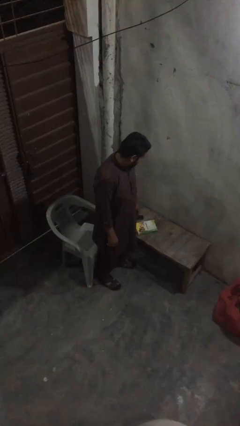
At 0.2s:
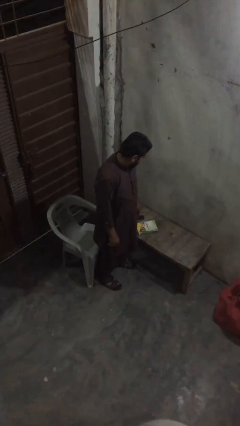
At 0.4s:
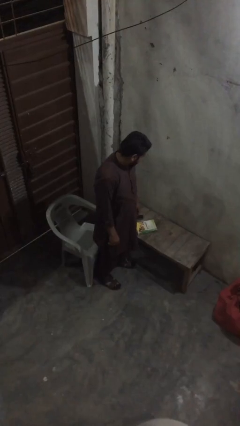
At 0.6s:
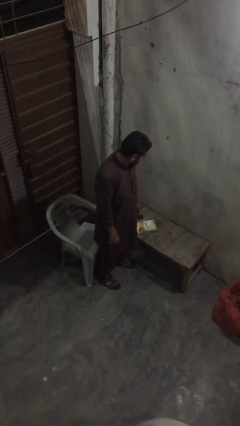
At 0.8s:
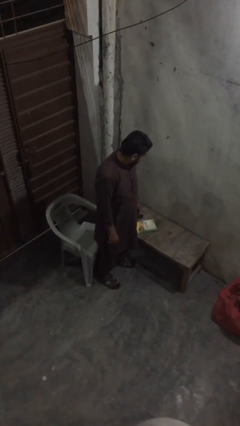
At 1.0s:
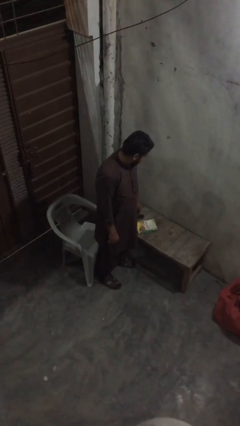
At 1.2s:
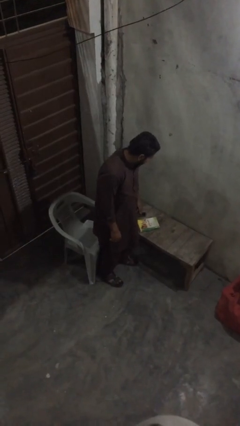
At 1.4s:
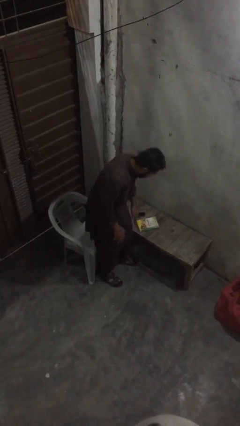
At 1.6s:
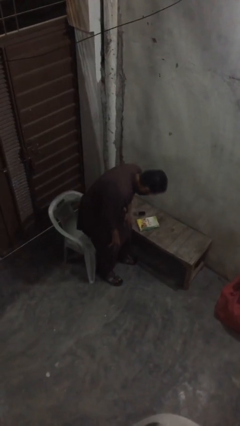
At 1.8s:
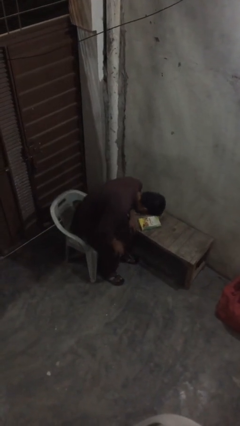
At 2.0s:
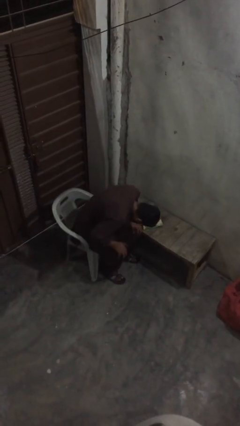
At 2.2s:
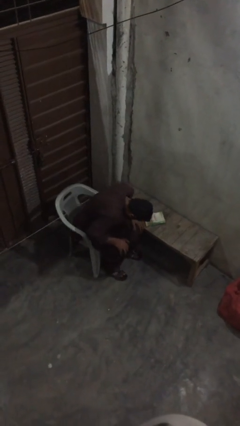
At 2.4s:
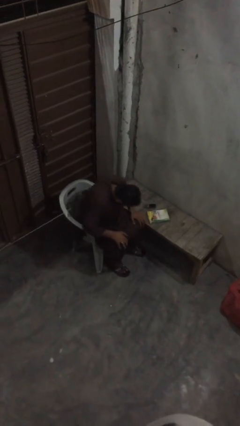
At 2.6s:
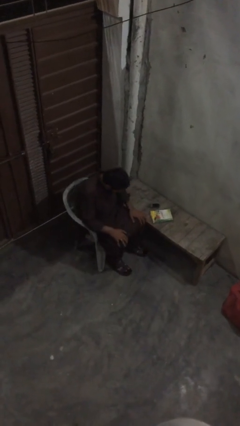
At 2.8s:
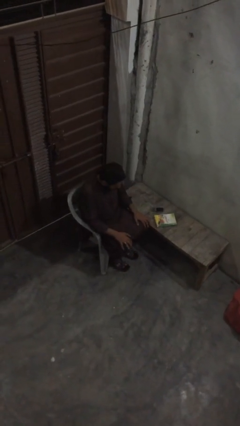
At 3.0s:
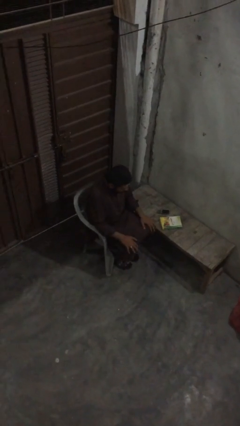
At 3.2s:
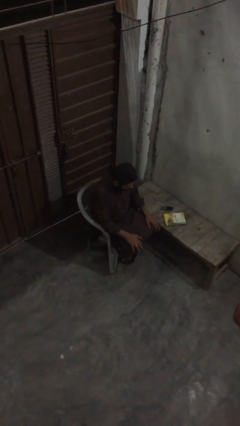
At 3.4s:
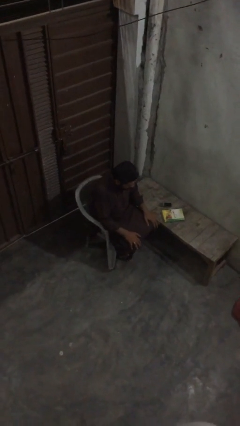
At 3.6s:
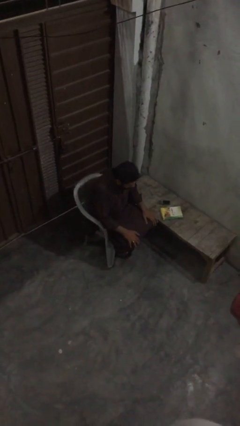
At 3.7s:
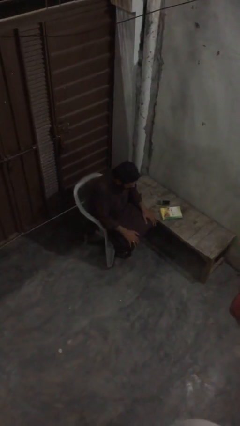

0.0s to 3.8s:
person sits down

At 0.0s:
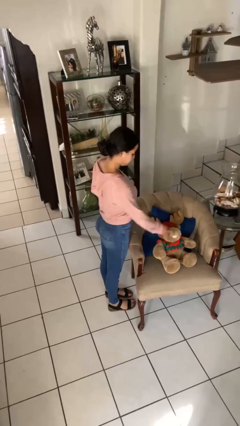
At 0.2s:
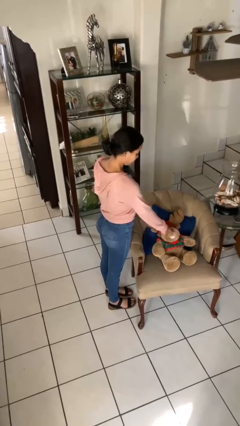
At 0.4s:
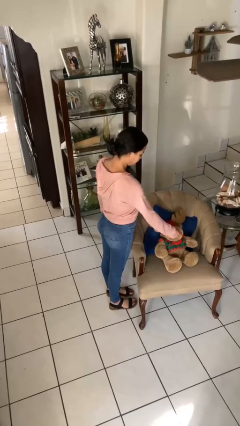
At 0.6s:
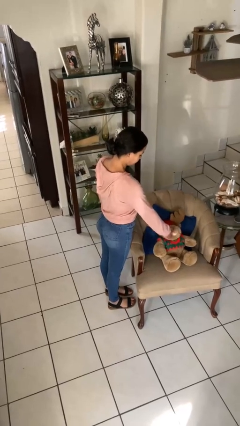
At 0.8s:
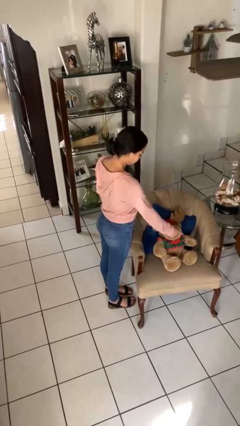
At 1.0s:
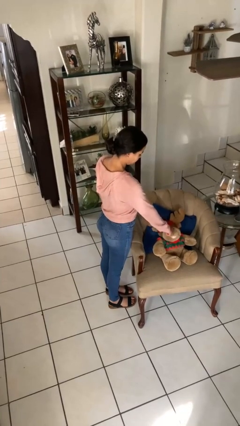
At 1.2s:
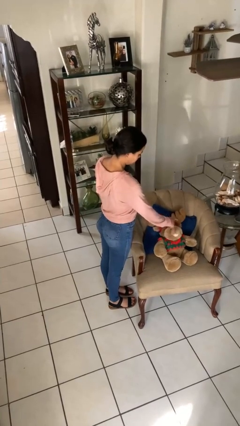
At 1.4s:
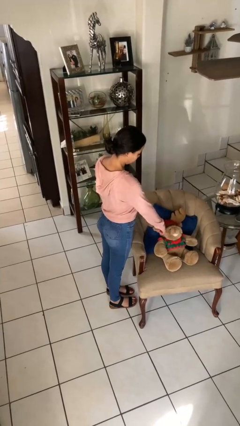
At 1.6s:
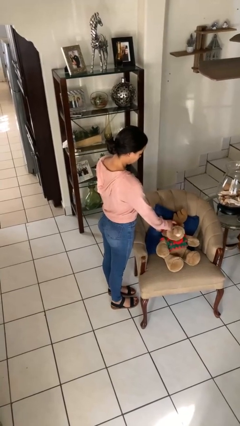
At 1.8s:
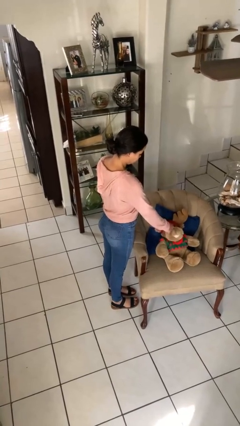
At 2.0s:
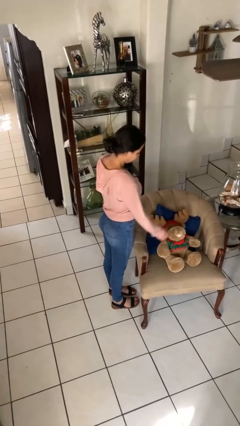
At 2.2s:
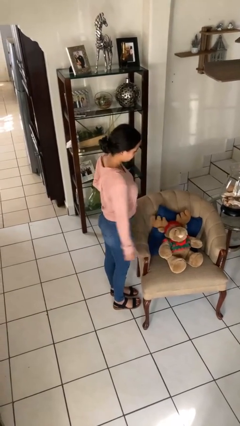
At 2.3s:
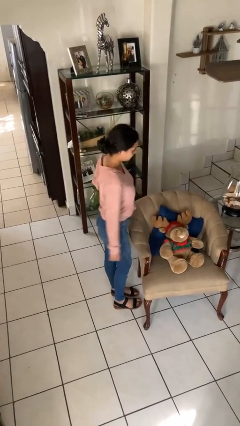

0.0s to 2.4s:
person taps object with finger

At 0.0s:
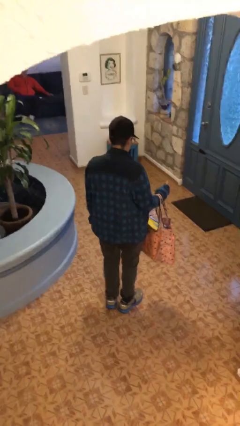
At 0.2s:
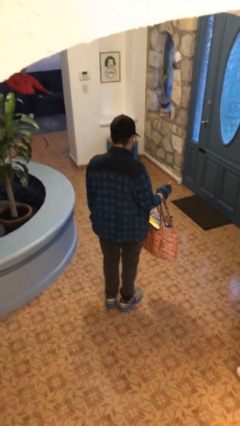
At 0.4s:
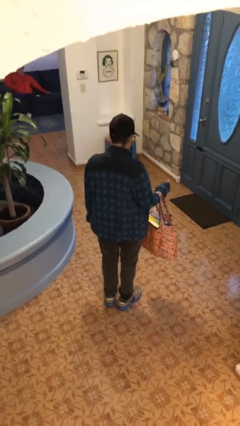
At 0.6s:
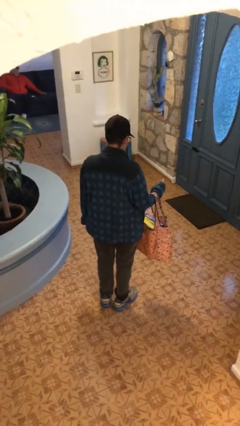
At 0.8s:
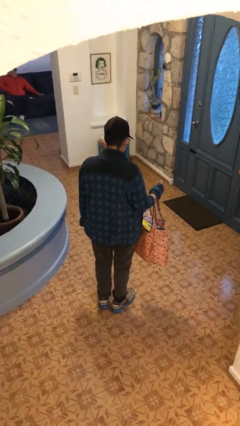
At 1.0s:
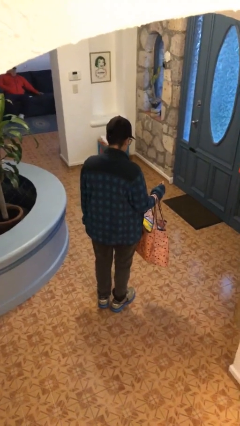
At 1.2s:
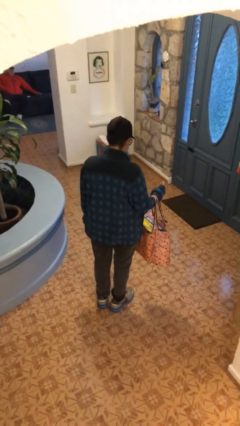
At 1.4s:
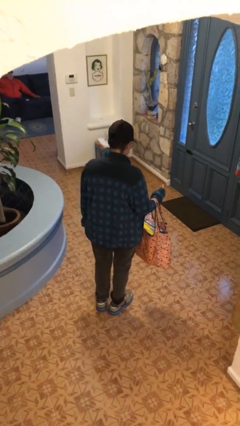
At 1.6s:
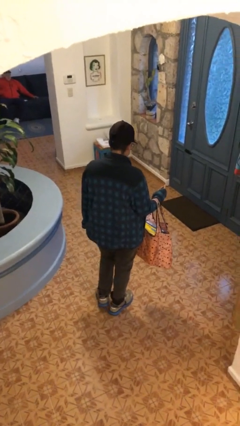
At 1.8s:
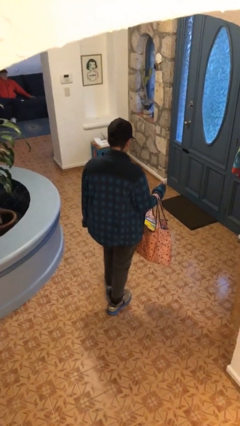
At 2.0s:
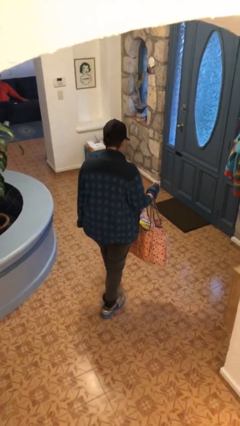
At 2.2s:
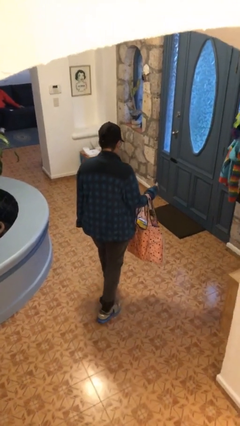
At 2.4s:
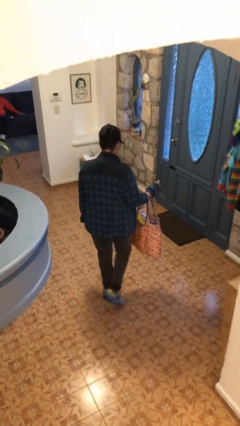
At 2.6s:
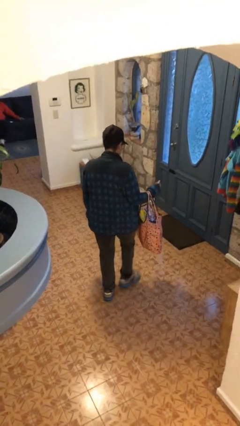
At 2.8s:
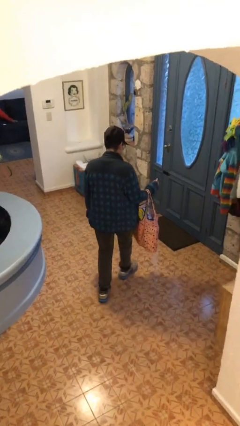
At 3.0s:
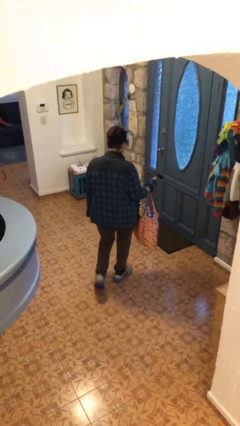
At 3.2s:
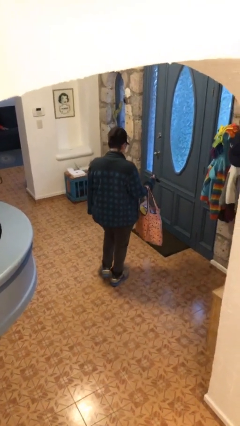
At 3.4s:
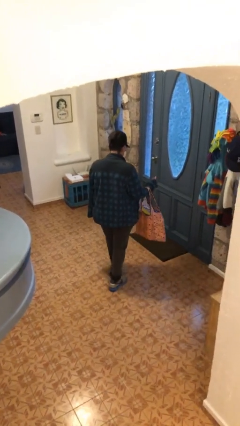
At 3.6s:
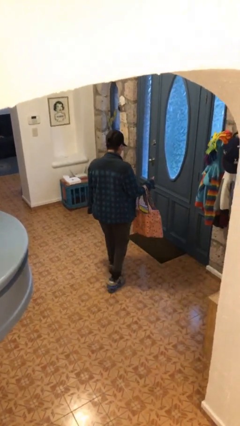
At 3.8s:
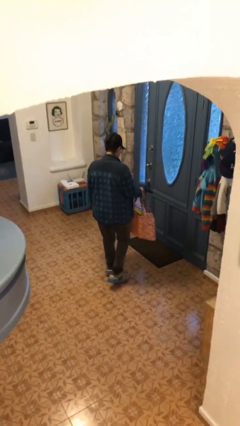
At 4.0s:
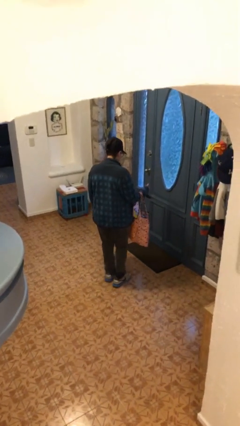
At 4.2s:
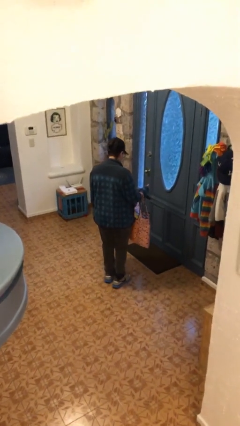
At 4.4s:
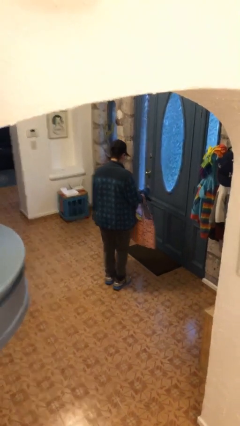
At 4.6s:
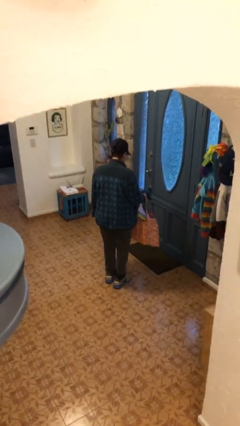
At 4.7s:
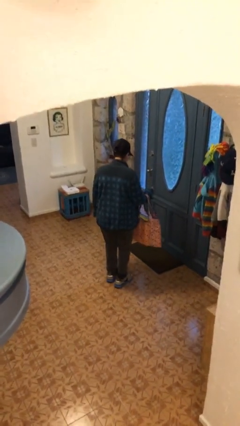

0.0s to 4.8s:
person carries groceries

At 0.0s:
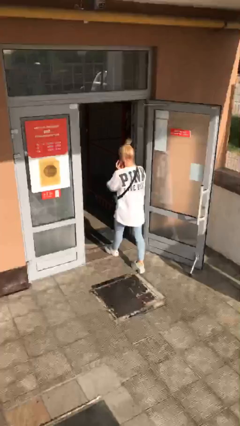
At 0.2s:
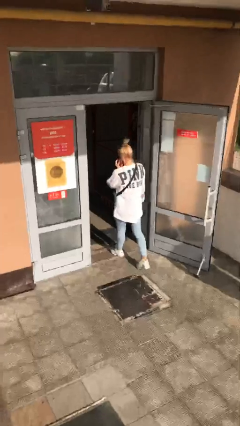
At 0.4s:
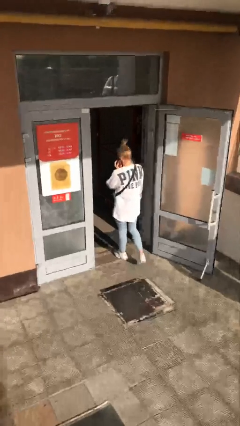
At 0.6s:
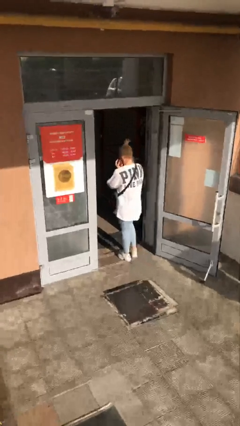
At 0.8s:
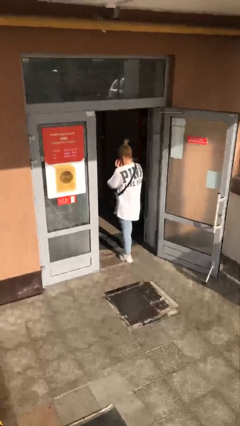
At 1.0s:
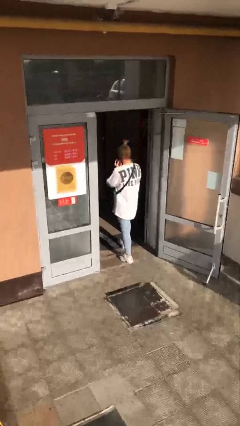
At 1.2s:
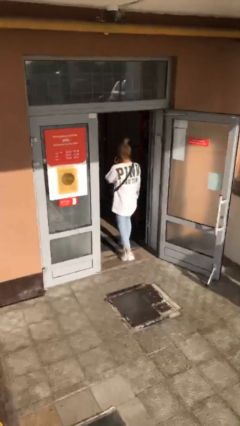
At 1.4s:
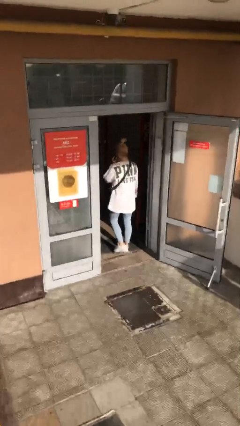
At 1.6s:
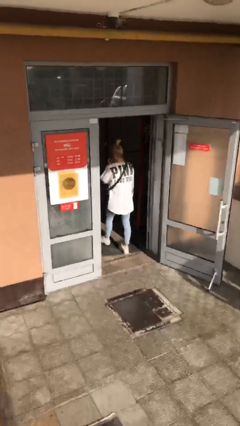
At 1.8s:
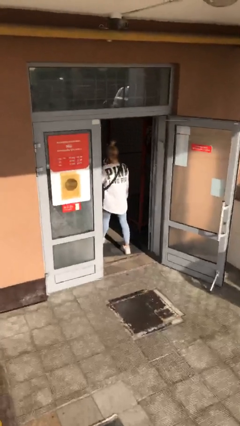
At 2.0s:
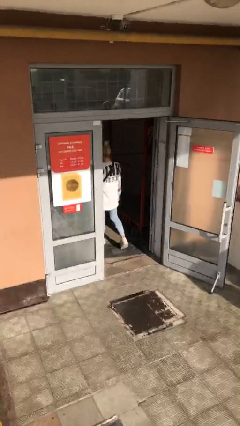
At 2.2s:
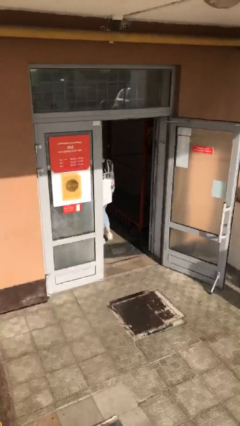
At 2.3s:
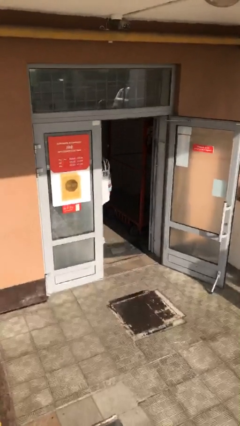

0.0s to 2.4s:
person exits scene through structure

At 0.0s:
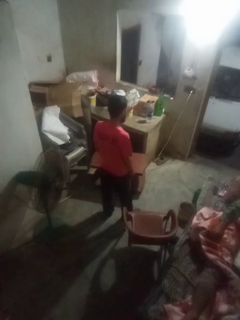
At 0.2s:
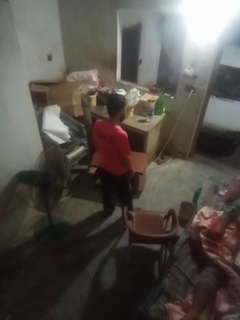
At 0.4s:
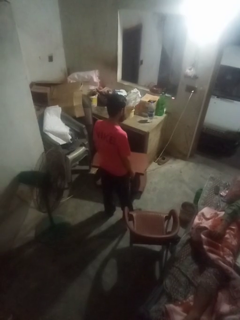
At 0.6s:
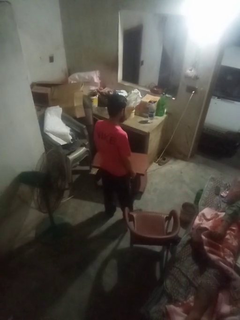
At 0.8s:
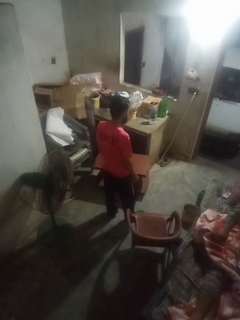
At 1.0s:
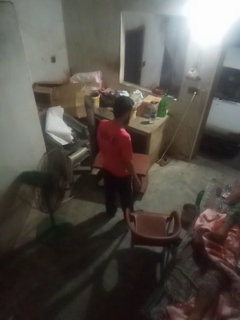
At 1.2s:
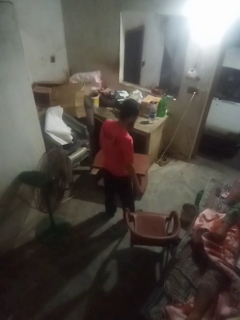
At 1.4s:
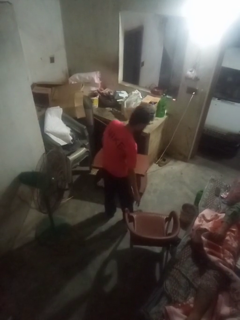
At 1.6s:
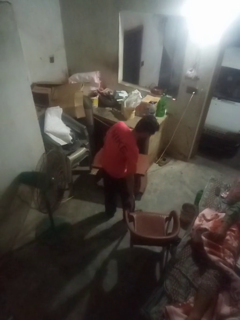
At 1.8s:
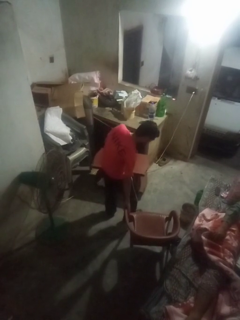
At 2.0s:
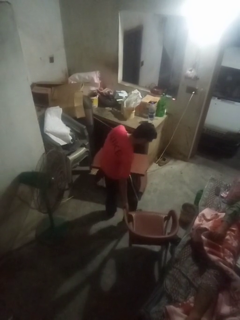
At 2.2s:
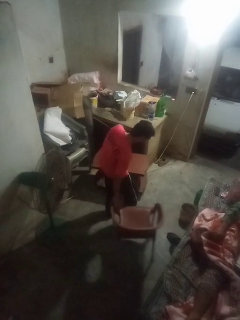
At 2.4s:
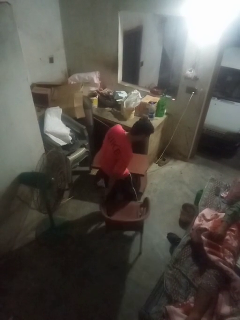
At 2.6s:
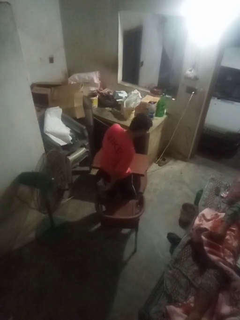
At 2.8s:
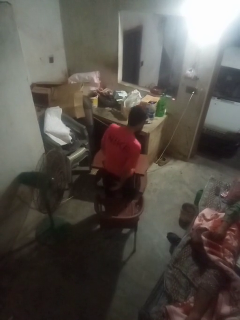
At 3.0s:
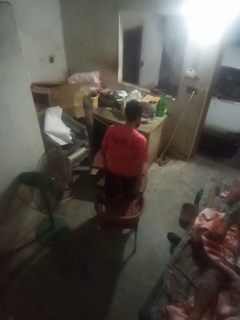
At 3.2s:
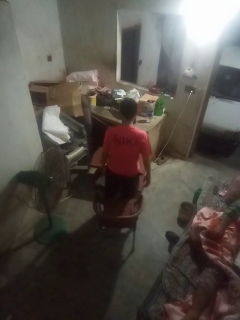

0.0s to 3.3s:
person pulls out chair

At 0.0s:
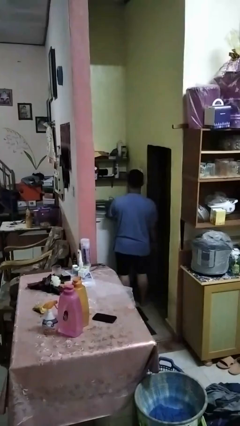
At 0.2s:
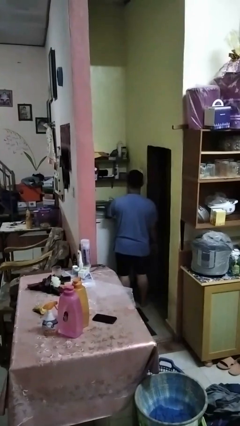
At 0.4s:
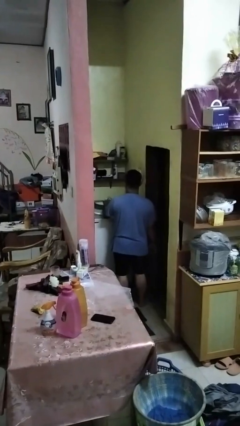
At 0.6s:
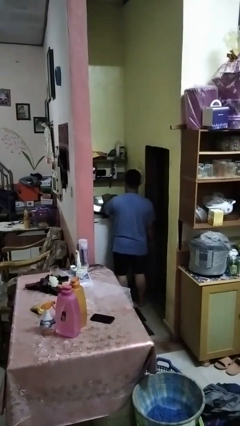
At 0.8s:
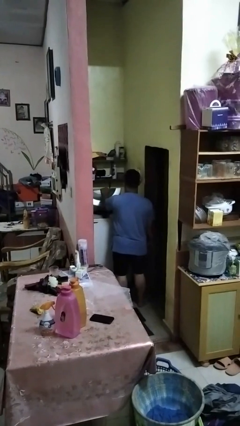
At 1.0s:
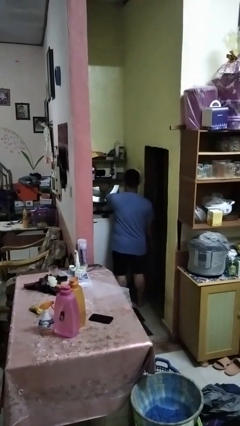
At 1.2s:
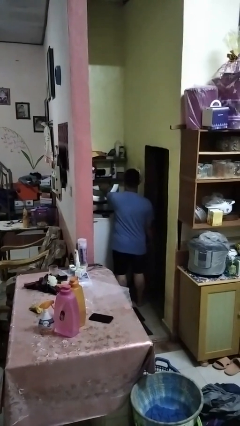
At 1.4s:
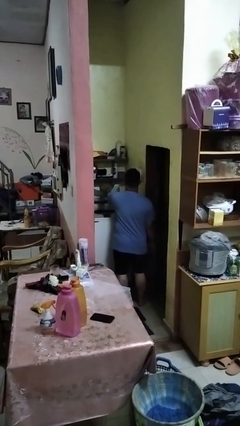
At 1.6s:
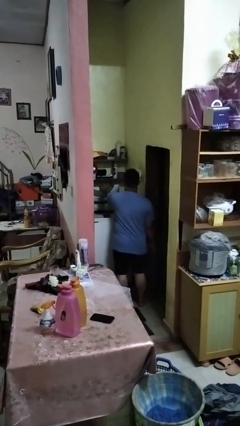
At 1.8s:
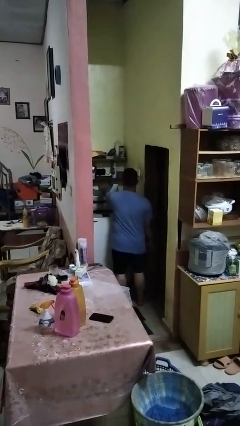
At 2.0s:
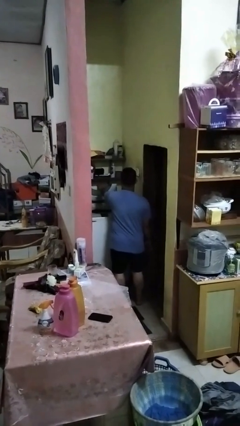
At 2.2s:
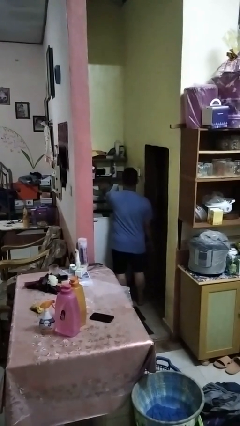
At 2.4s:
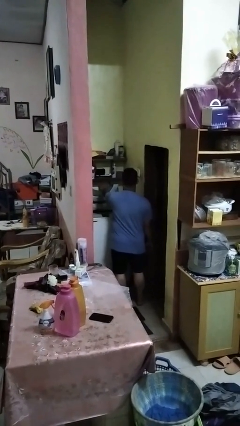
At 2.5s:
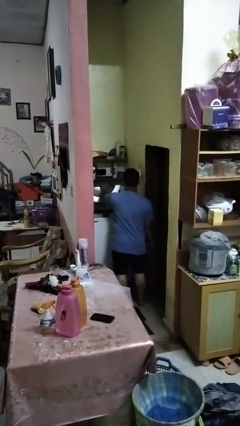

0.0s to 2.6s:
person opens clothes washer
